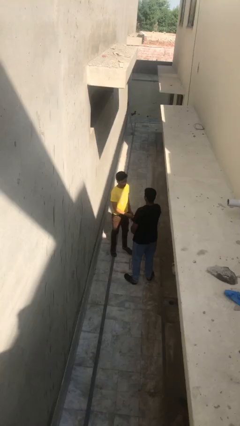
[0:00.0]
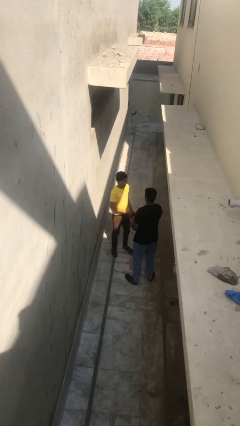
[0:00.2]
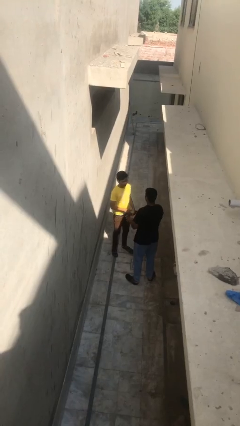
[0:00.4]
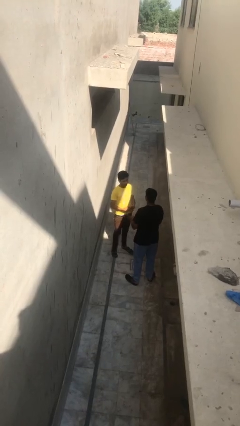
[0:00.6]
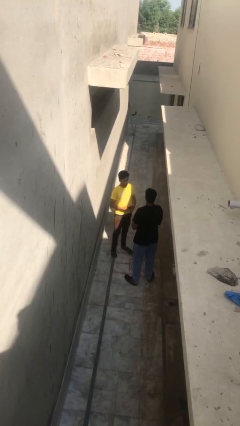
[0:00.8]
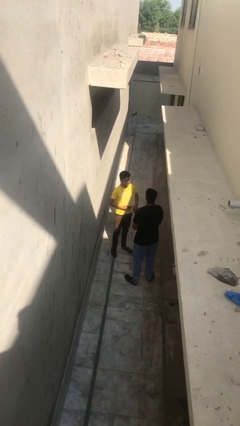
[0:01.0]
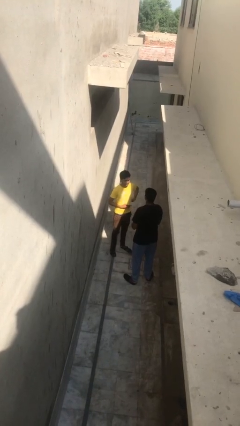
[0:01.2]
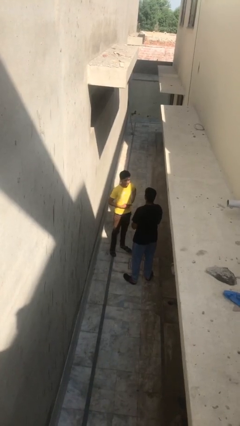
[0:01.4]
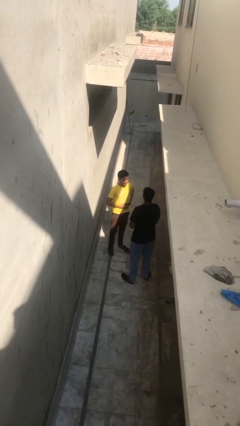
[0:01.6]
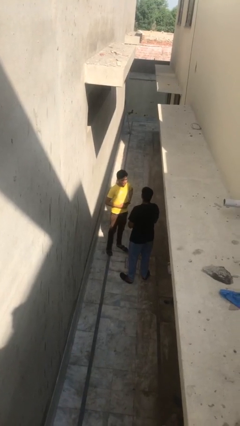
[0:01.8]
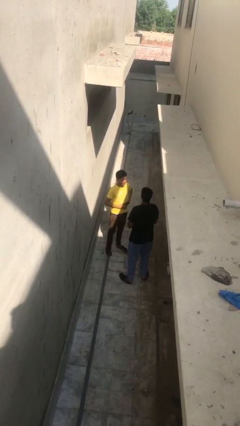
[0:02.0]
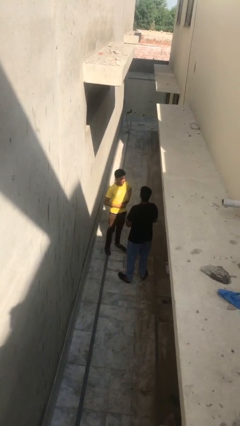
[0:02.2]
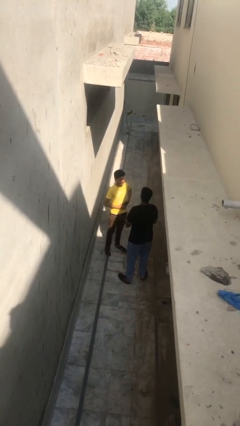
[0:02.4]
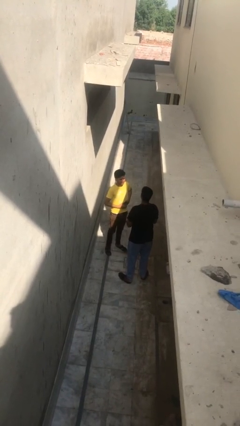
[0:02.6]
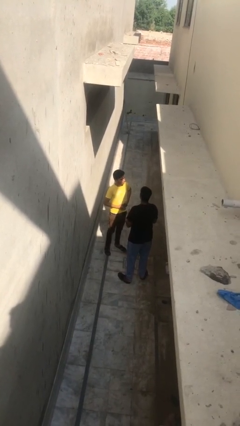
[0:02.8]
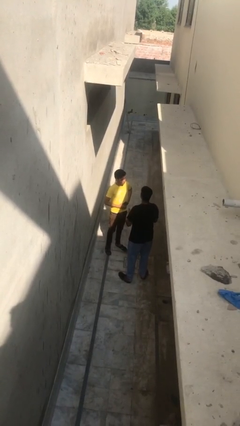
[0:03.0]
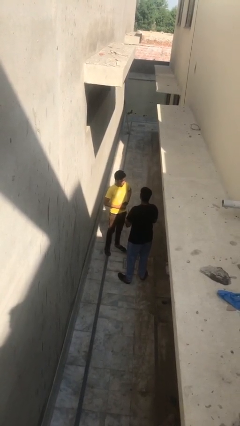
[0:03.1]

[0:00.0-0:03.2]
person talks to person

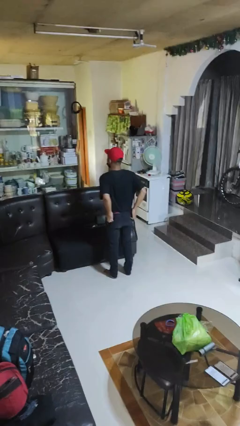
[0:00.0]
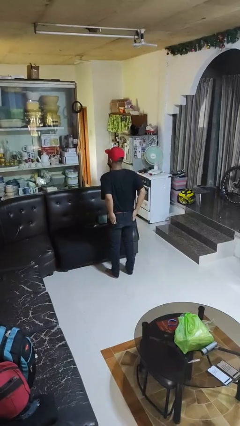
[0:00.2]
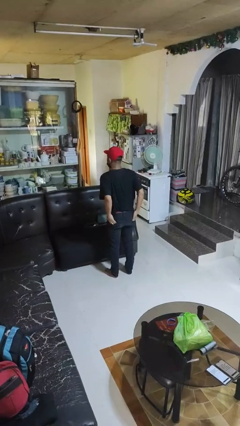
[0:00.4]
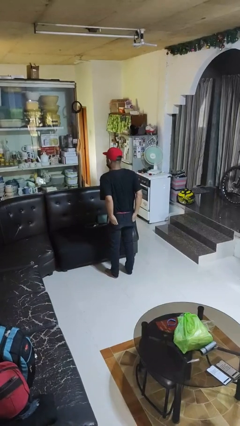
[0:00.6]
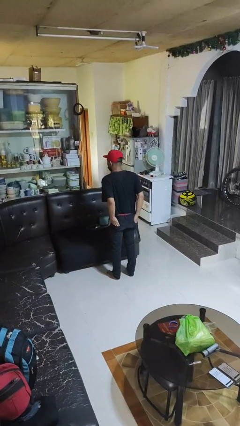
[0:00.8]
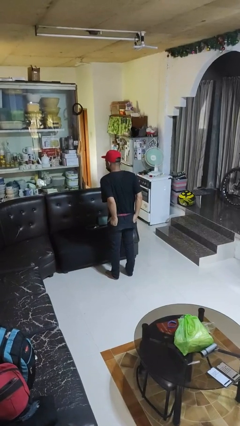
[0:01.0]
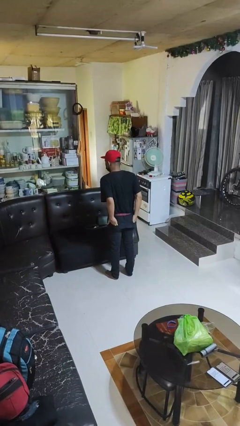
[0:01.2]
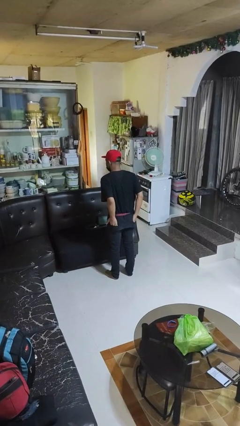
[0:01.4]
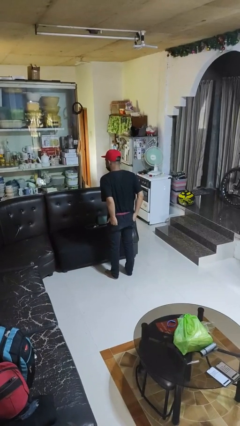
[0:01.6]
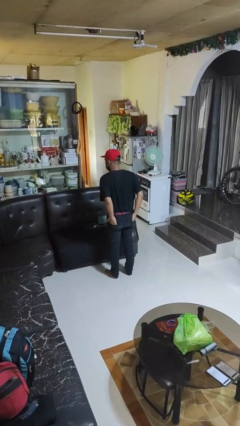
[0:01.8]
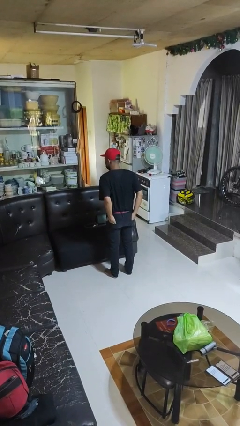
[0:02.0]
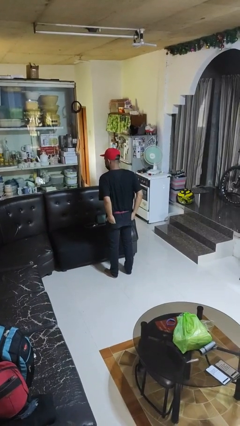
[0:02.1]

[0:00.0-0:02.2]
person puts hands in back pockets

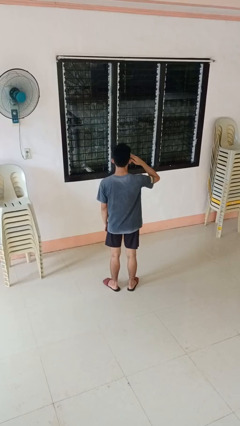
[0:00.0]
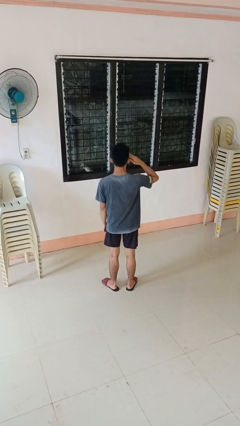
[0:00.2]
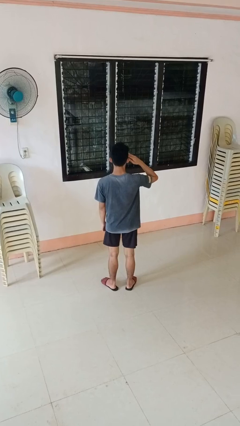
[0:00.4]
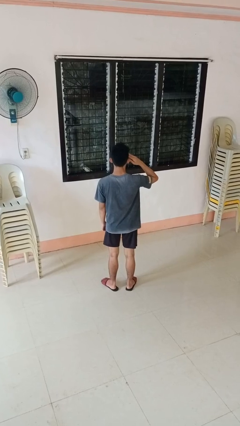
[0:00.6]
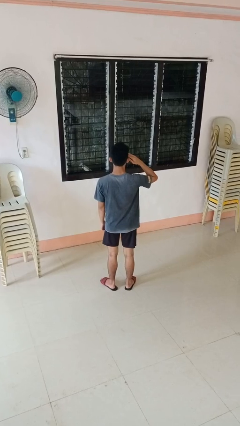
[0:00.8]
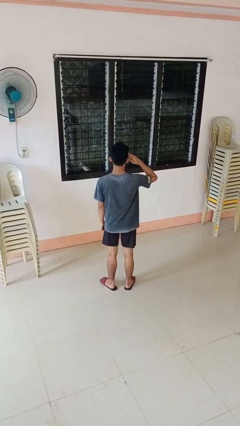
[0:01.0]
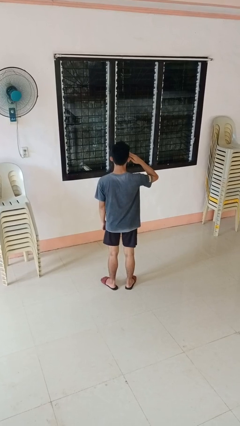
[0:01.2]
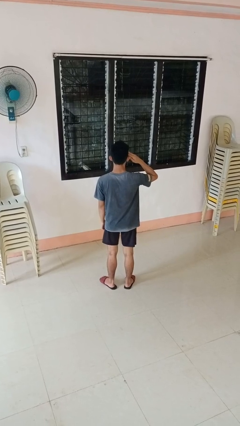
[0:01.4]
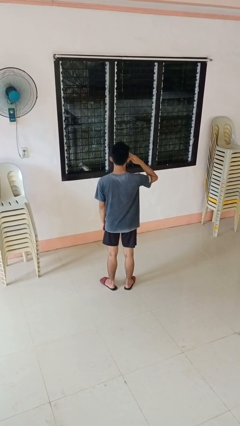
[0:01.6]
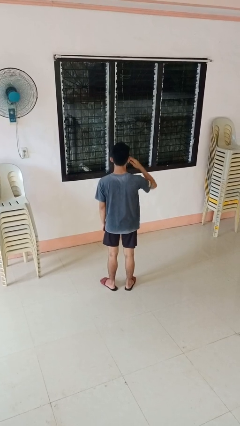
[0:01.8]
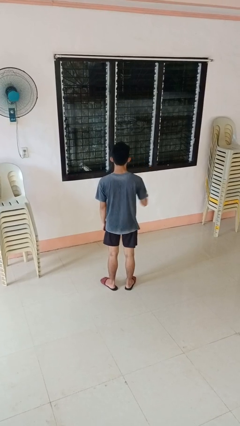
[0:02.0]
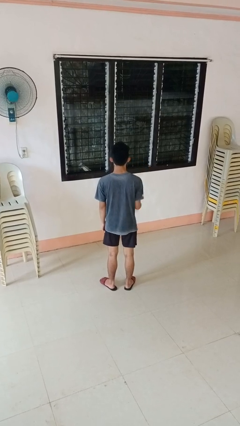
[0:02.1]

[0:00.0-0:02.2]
person salutes

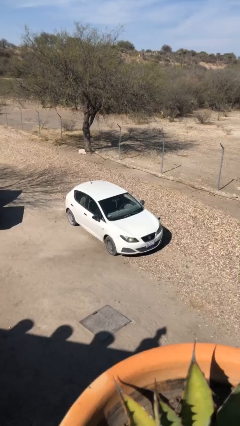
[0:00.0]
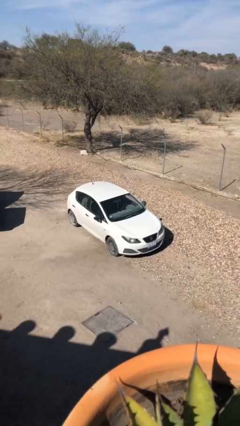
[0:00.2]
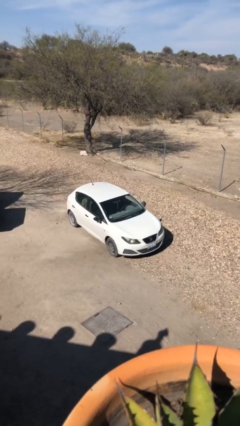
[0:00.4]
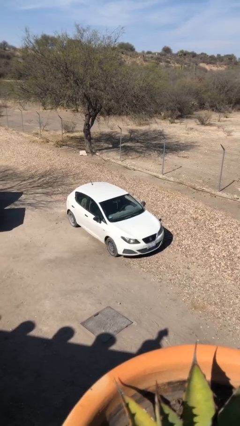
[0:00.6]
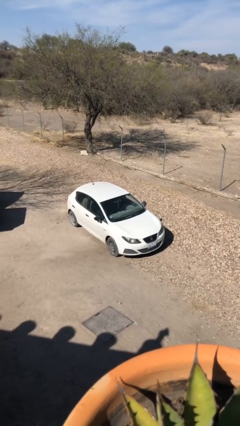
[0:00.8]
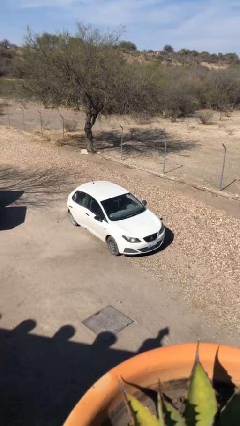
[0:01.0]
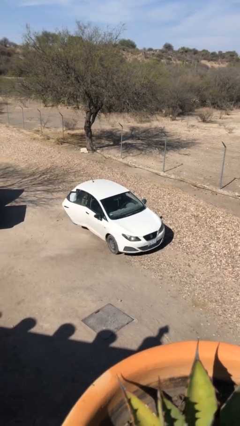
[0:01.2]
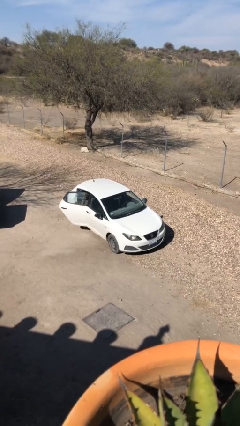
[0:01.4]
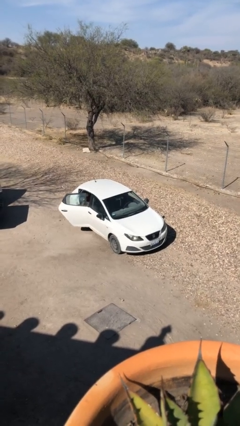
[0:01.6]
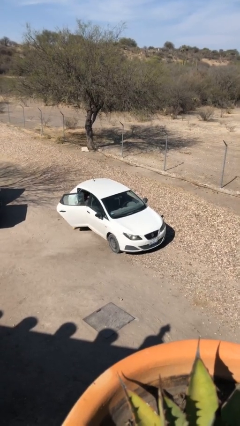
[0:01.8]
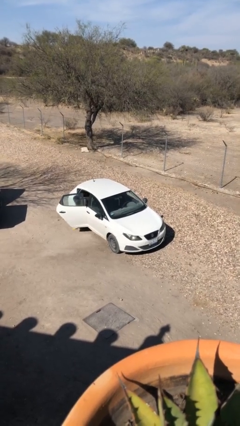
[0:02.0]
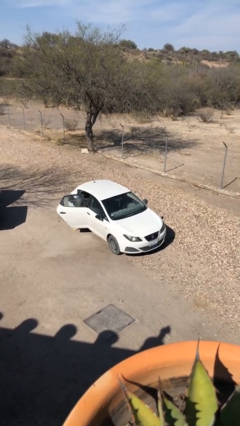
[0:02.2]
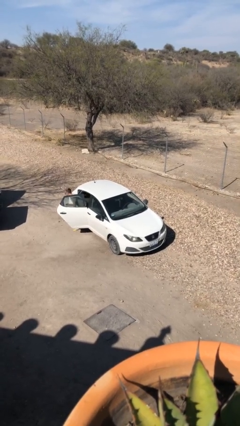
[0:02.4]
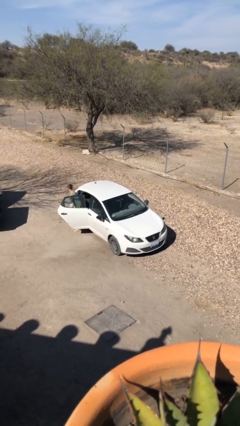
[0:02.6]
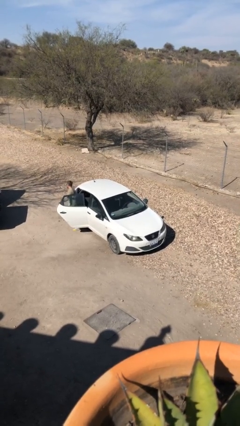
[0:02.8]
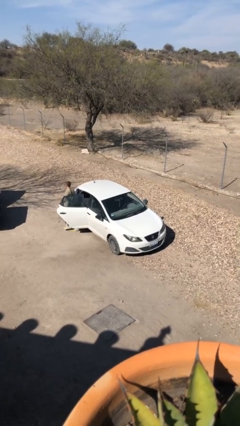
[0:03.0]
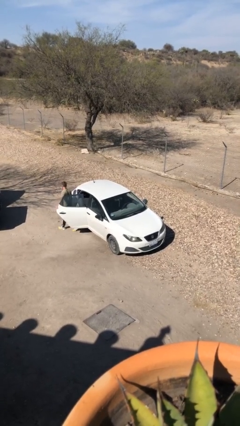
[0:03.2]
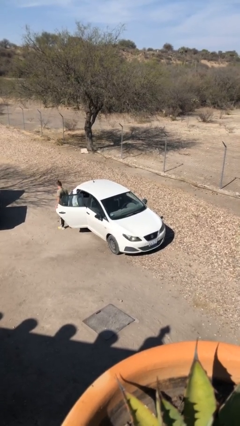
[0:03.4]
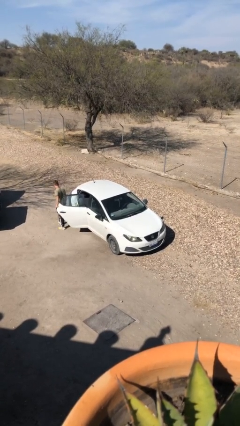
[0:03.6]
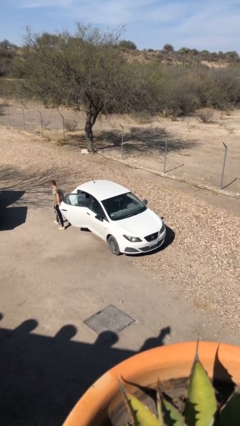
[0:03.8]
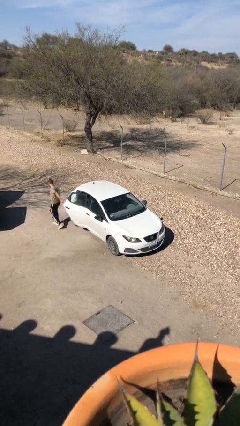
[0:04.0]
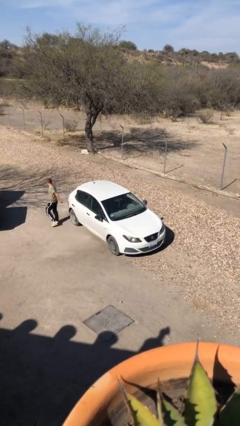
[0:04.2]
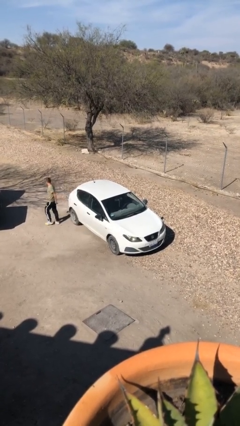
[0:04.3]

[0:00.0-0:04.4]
car drops off person

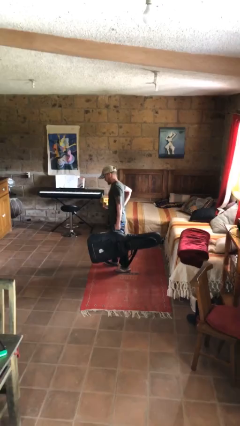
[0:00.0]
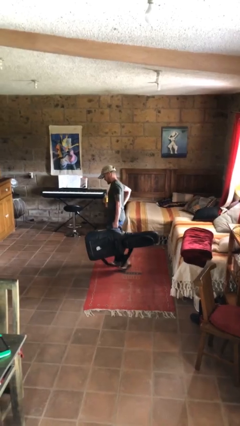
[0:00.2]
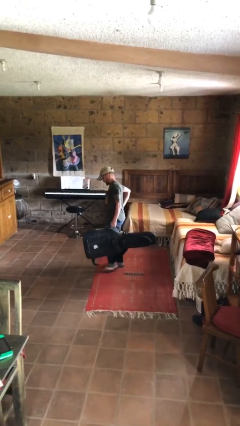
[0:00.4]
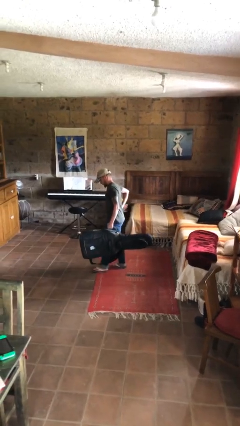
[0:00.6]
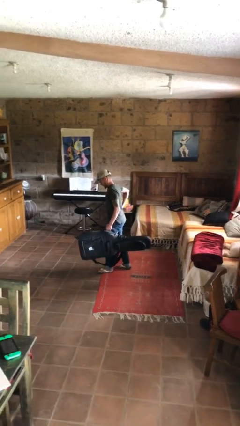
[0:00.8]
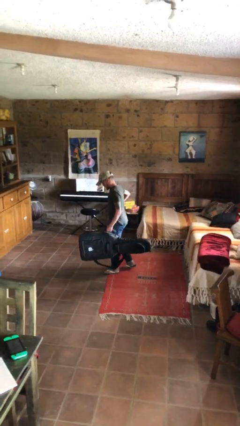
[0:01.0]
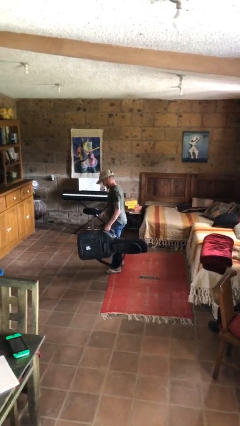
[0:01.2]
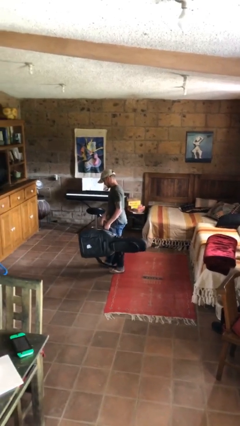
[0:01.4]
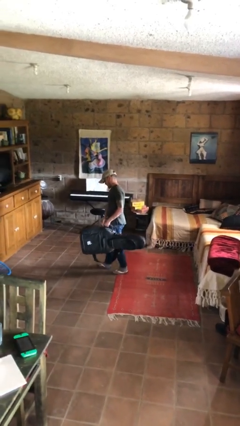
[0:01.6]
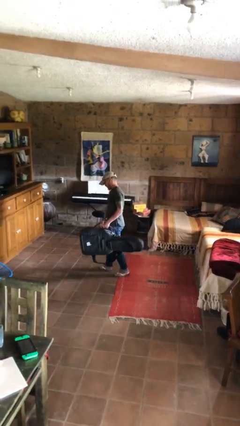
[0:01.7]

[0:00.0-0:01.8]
person carries heavy object

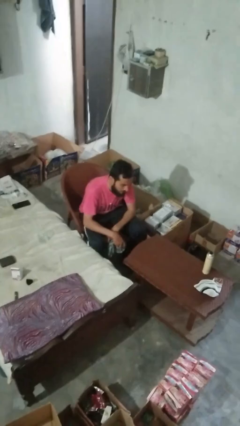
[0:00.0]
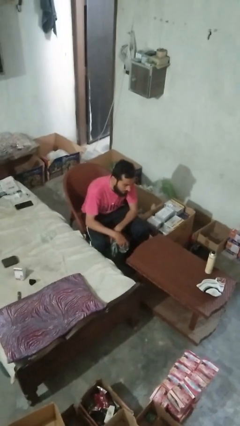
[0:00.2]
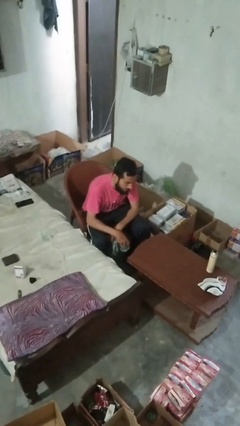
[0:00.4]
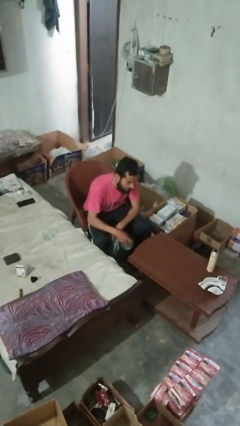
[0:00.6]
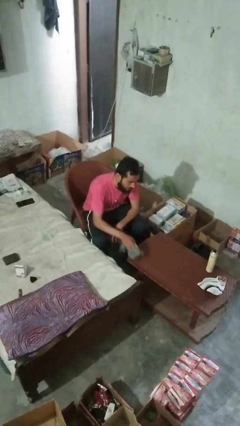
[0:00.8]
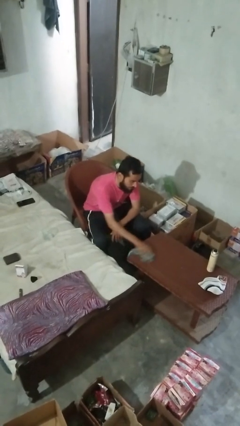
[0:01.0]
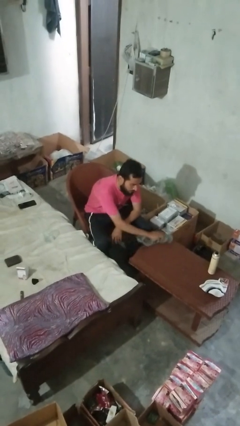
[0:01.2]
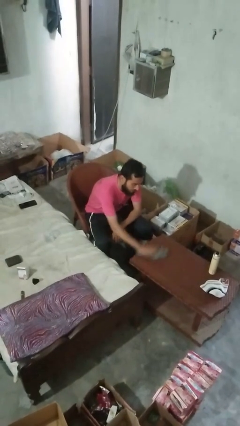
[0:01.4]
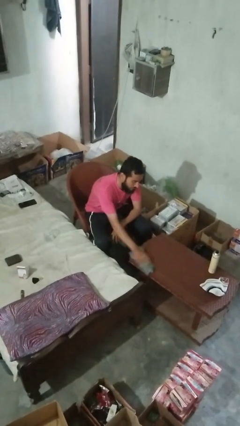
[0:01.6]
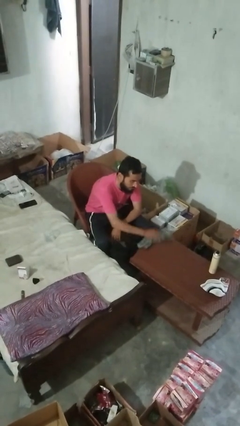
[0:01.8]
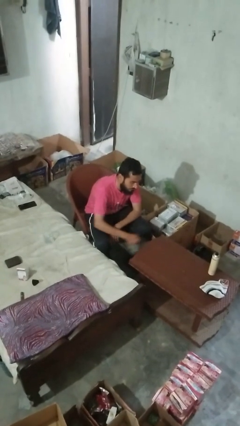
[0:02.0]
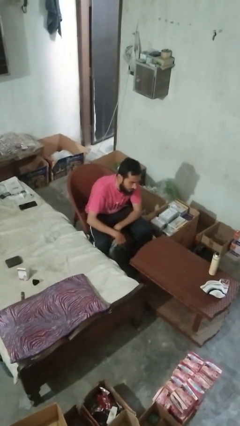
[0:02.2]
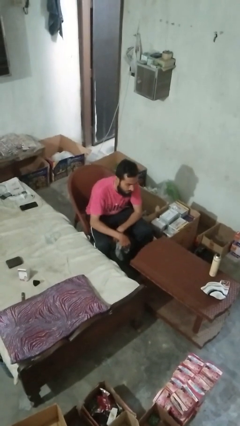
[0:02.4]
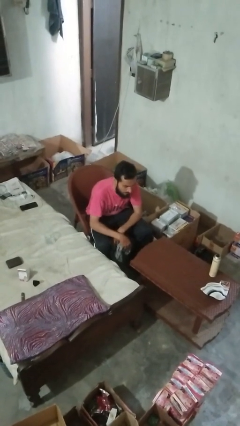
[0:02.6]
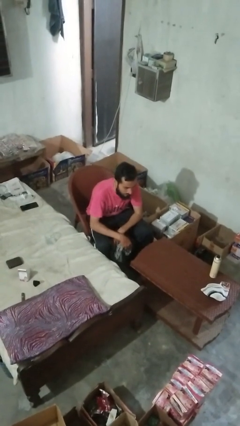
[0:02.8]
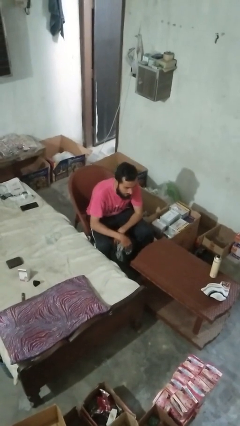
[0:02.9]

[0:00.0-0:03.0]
person cleans table with rag

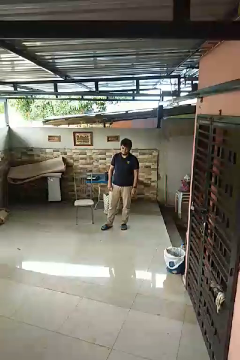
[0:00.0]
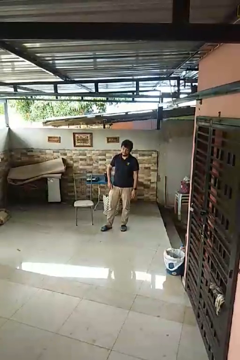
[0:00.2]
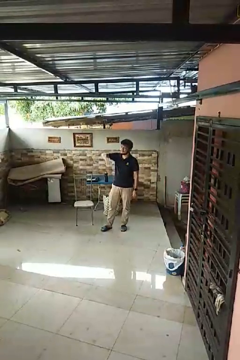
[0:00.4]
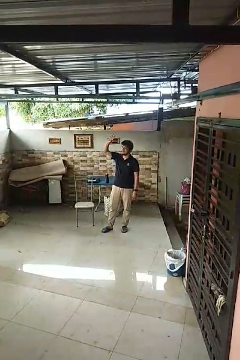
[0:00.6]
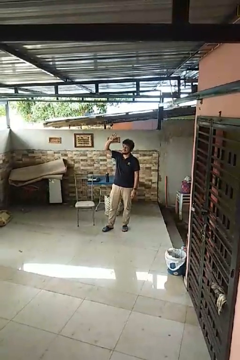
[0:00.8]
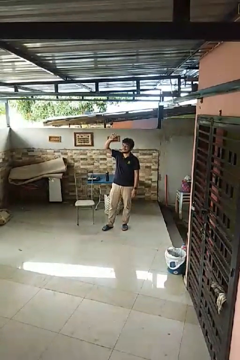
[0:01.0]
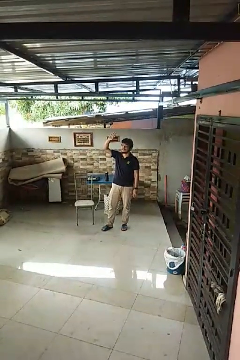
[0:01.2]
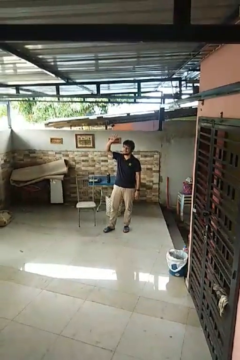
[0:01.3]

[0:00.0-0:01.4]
person gestures swipe up
